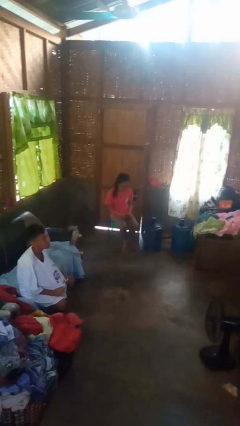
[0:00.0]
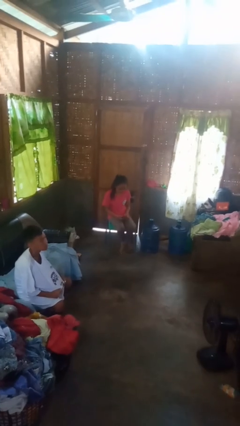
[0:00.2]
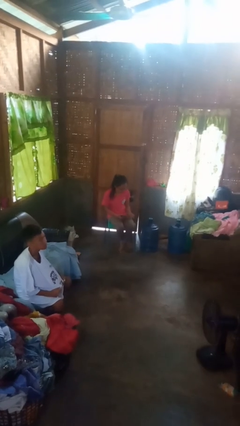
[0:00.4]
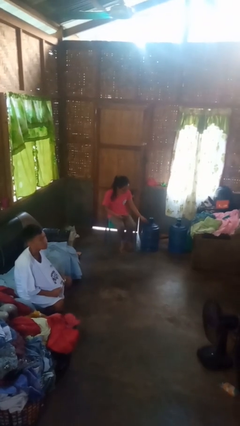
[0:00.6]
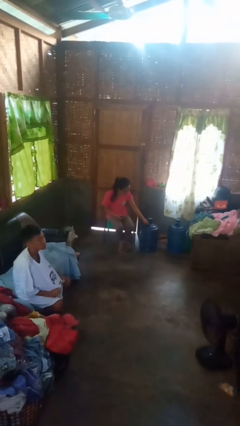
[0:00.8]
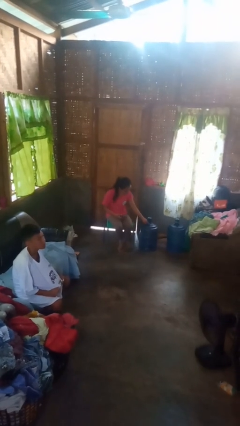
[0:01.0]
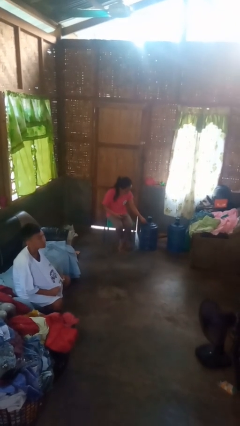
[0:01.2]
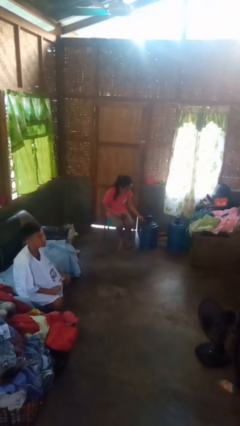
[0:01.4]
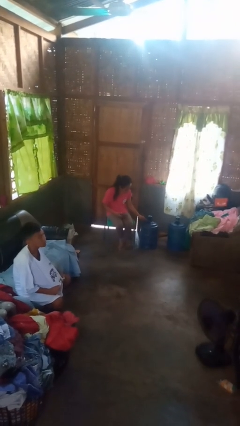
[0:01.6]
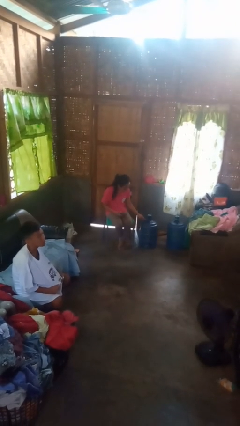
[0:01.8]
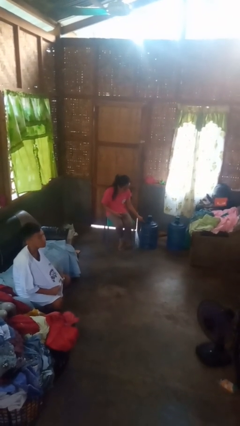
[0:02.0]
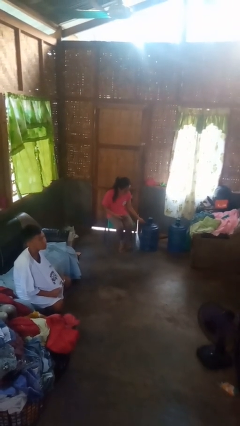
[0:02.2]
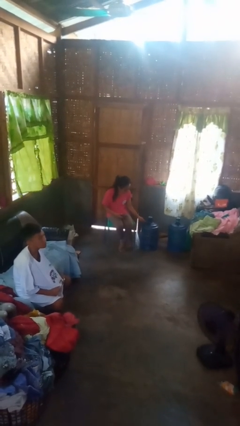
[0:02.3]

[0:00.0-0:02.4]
person taps object with finger

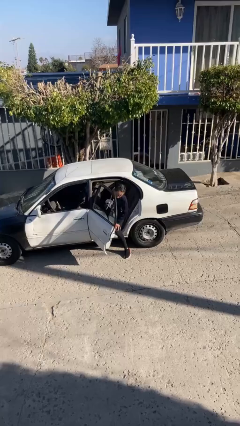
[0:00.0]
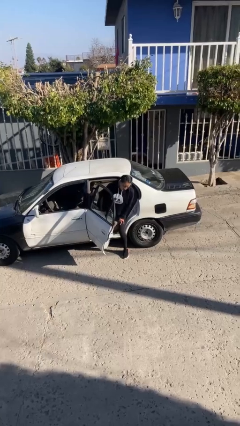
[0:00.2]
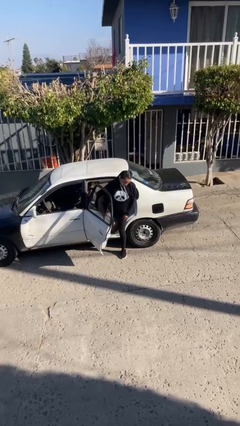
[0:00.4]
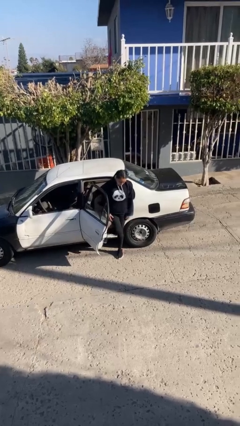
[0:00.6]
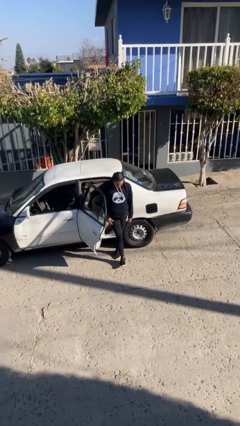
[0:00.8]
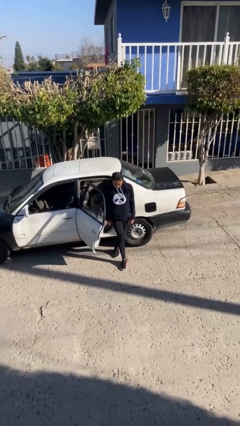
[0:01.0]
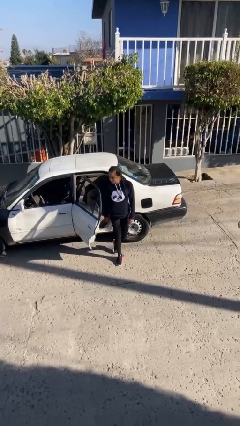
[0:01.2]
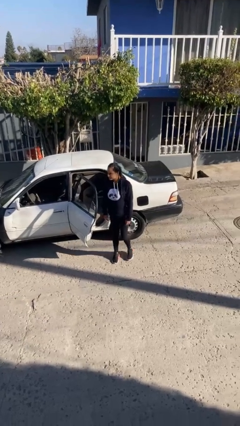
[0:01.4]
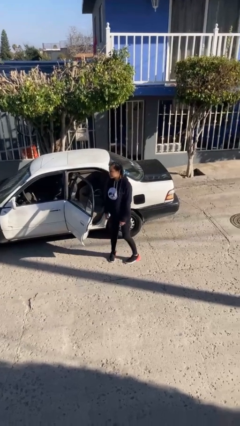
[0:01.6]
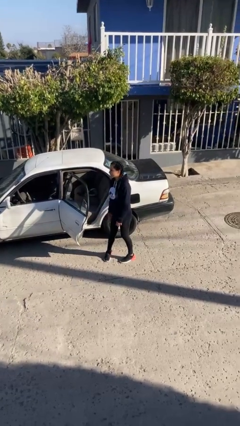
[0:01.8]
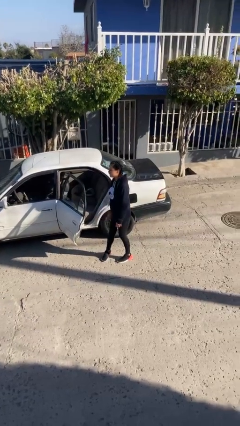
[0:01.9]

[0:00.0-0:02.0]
person exits car

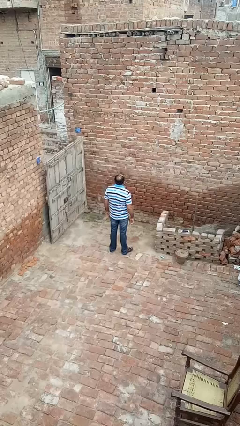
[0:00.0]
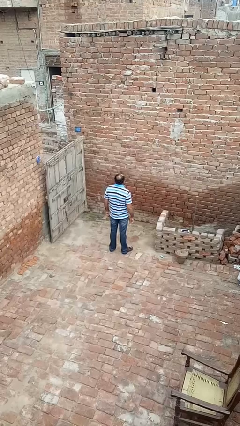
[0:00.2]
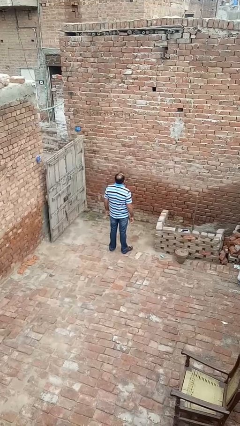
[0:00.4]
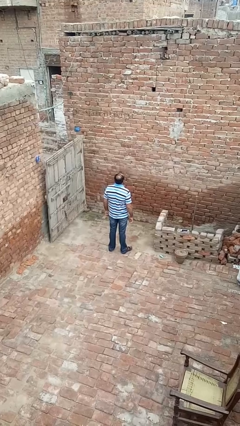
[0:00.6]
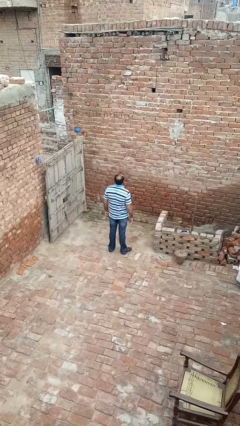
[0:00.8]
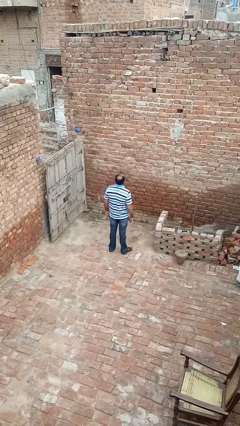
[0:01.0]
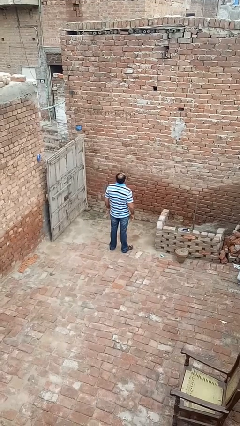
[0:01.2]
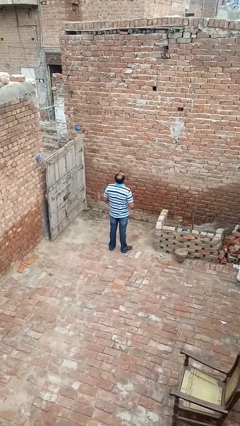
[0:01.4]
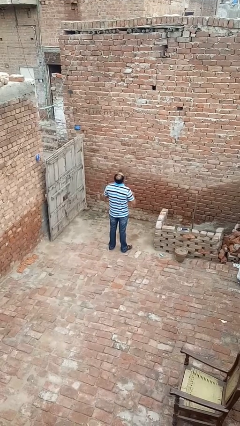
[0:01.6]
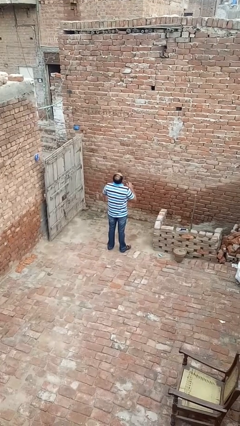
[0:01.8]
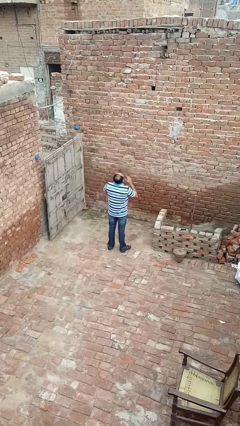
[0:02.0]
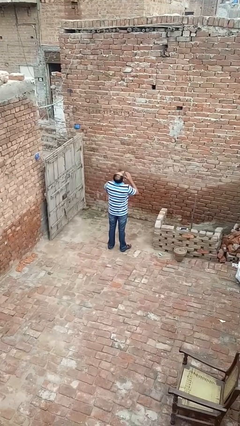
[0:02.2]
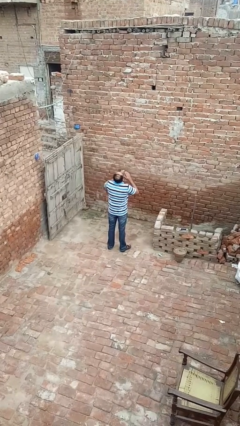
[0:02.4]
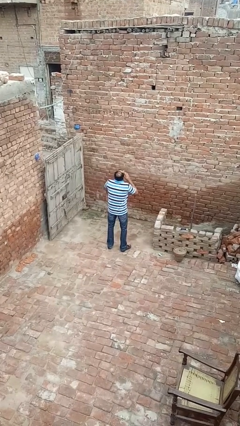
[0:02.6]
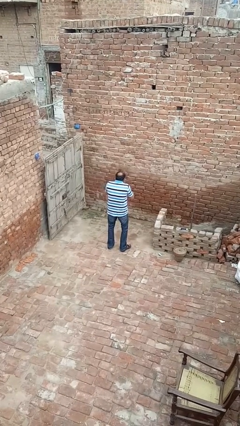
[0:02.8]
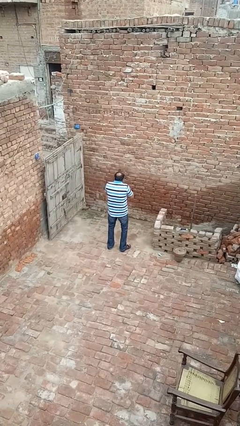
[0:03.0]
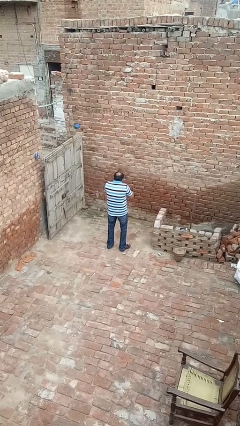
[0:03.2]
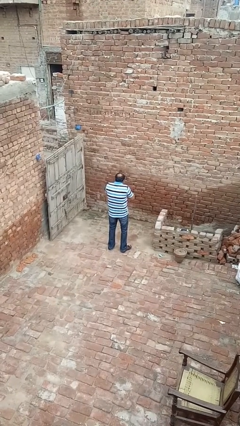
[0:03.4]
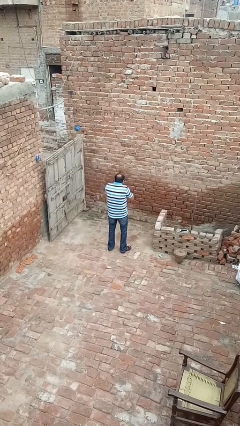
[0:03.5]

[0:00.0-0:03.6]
person sneezes into hand

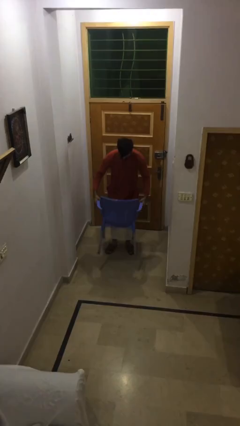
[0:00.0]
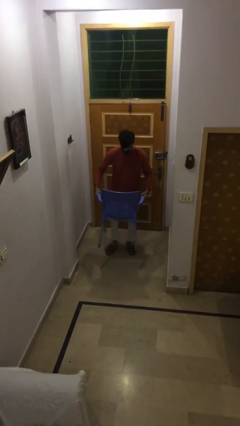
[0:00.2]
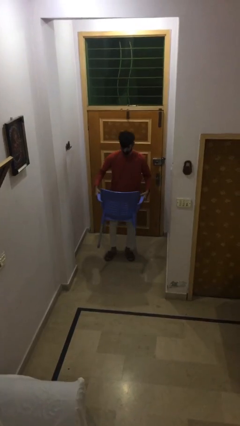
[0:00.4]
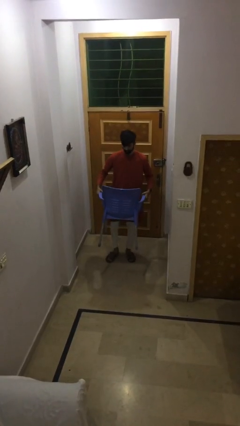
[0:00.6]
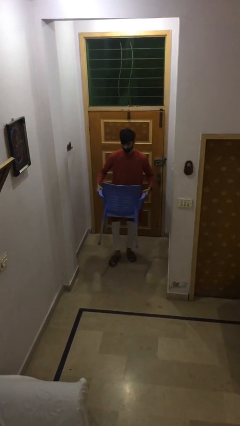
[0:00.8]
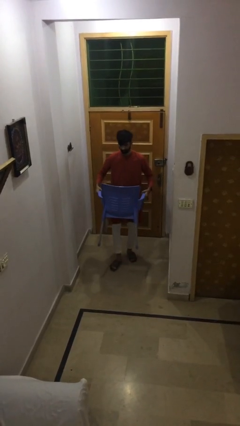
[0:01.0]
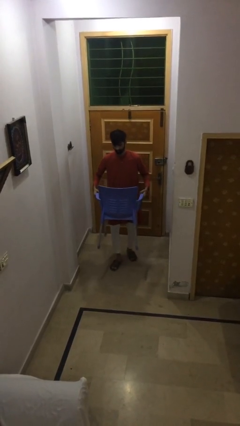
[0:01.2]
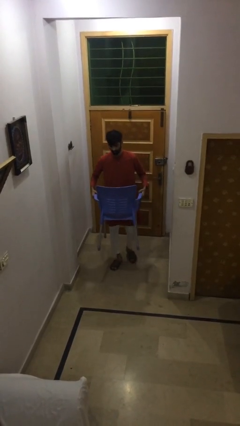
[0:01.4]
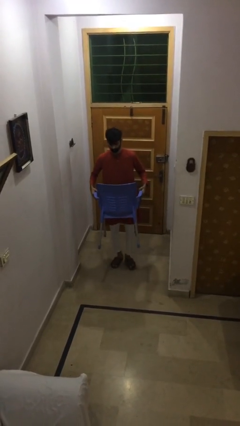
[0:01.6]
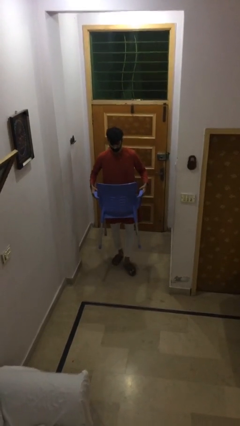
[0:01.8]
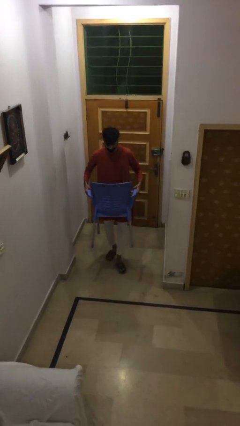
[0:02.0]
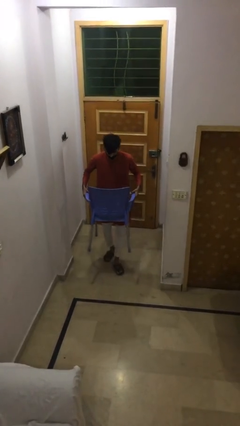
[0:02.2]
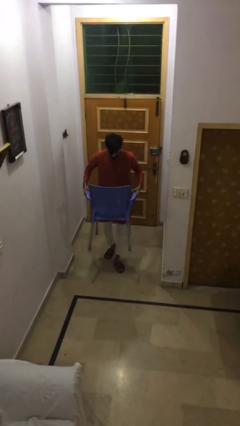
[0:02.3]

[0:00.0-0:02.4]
person carries heavy object

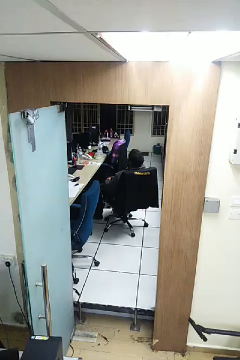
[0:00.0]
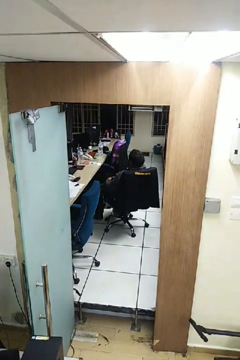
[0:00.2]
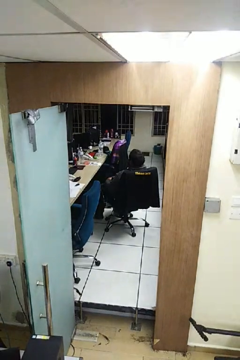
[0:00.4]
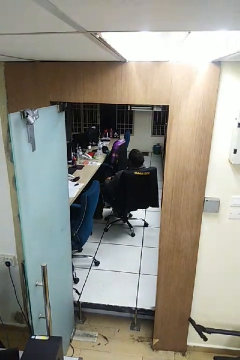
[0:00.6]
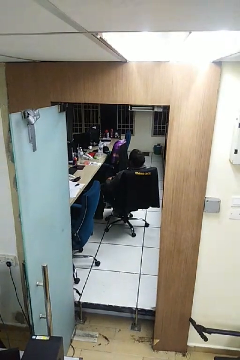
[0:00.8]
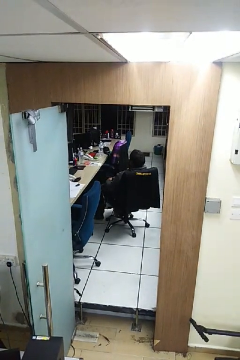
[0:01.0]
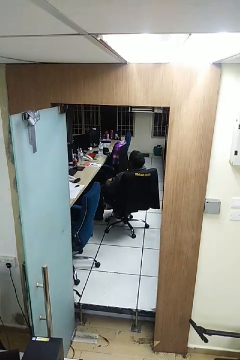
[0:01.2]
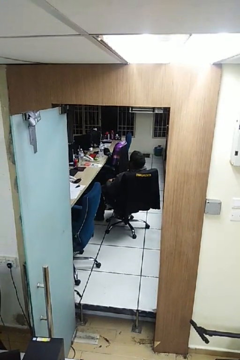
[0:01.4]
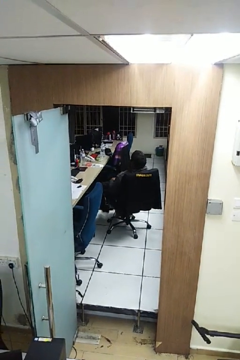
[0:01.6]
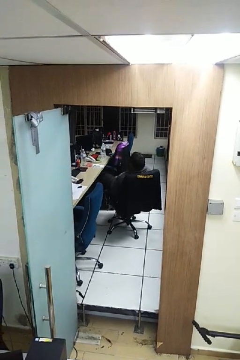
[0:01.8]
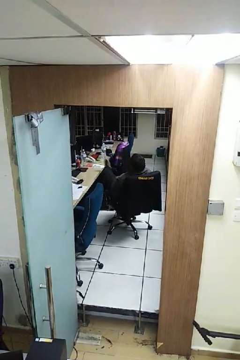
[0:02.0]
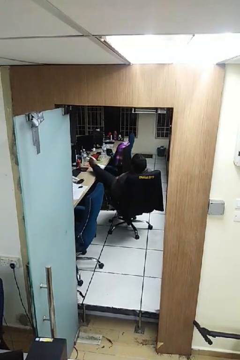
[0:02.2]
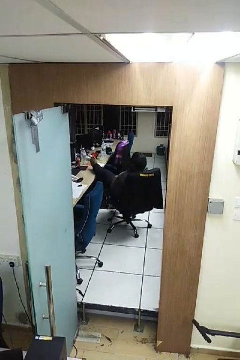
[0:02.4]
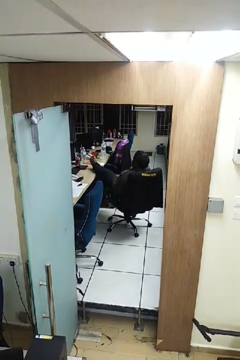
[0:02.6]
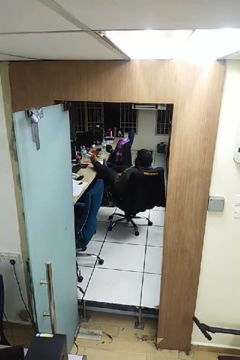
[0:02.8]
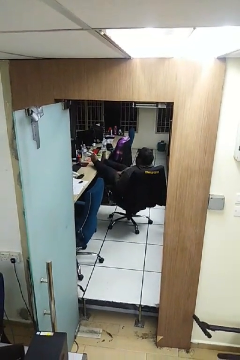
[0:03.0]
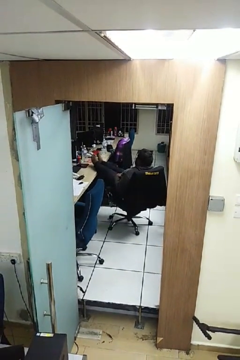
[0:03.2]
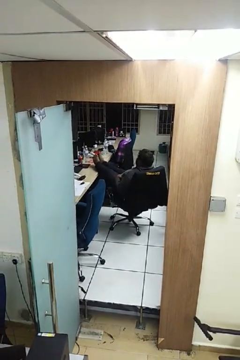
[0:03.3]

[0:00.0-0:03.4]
person puts feet up

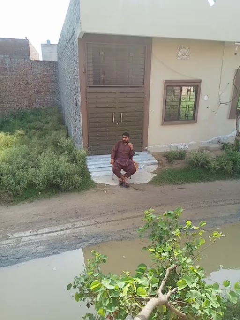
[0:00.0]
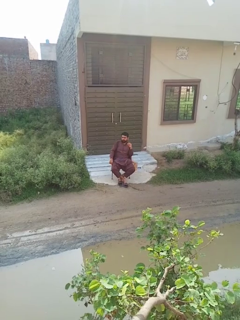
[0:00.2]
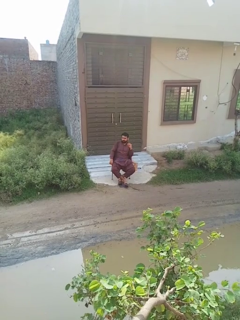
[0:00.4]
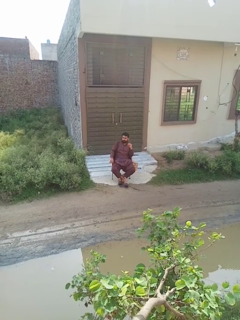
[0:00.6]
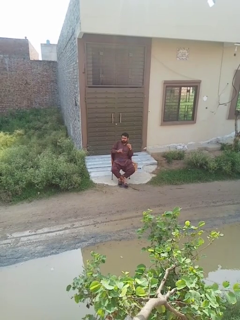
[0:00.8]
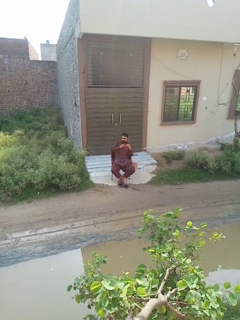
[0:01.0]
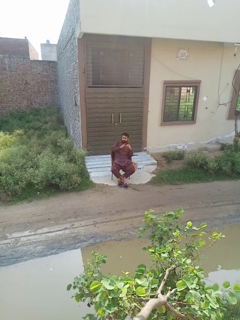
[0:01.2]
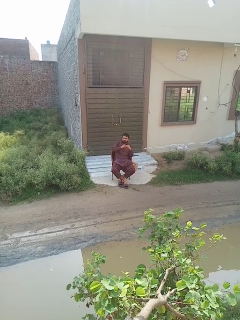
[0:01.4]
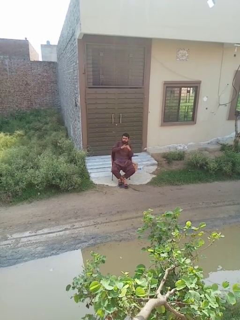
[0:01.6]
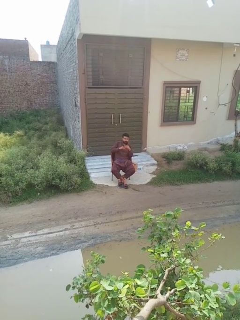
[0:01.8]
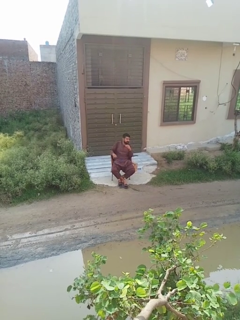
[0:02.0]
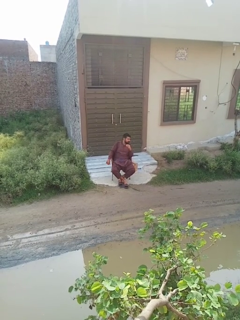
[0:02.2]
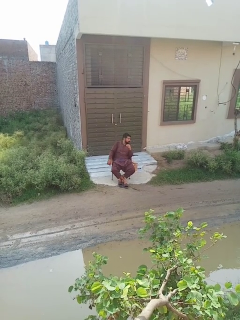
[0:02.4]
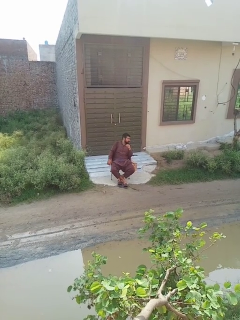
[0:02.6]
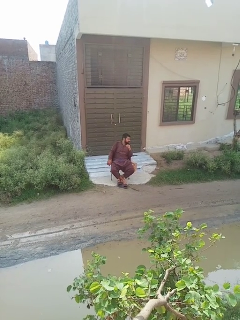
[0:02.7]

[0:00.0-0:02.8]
person puts on ring

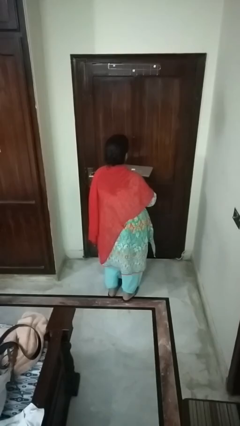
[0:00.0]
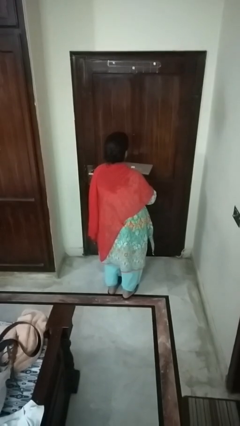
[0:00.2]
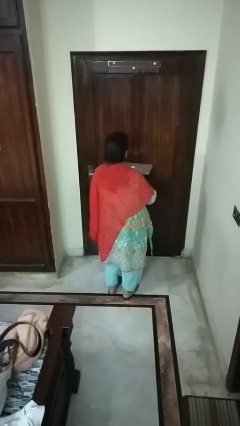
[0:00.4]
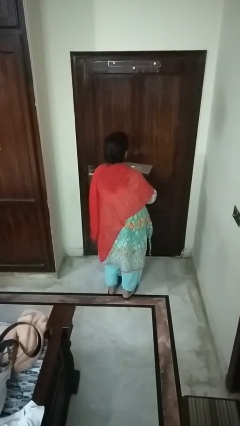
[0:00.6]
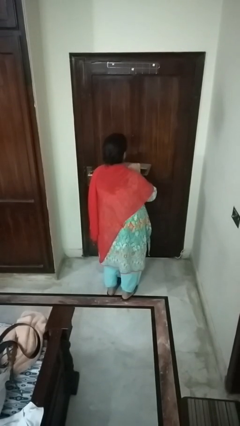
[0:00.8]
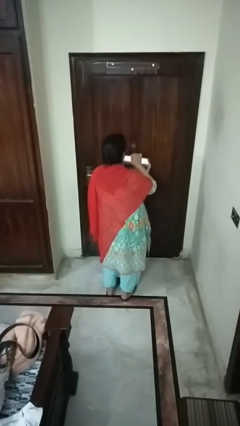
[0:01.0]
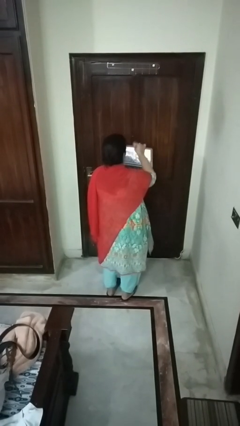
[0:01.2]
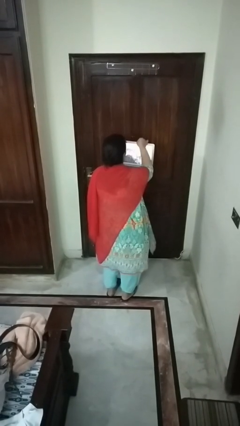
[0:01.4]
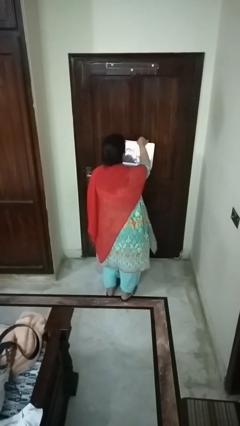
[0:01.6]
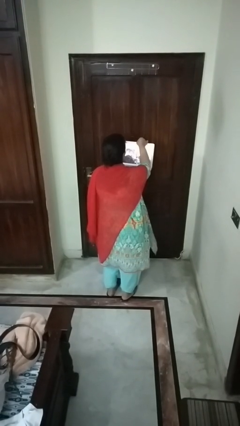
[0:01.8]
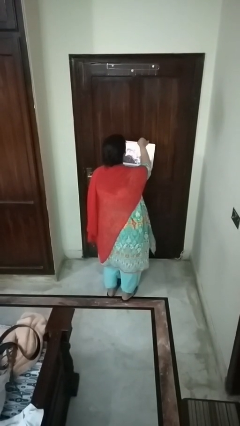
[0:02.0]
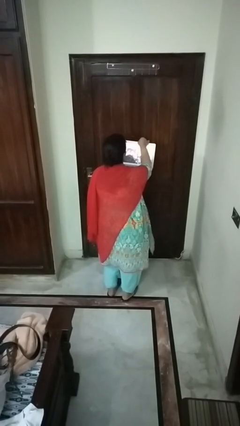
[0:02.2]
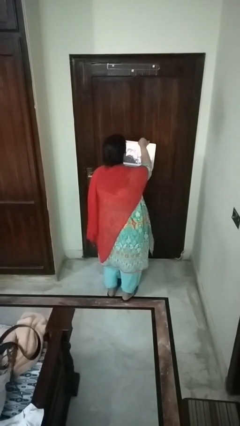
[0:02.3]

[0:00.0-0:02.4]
person opens laptop
